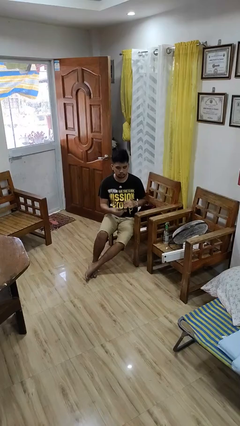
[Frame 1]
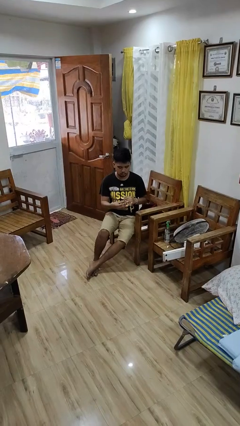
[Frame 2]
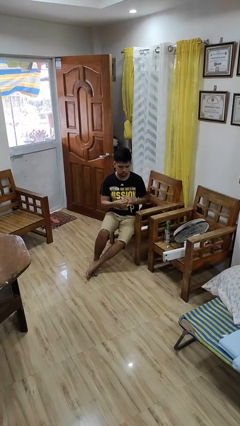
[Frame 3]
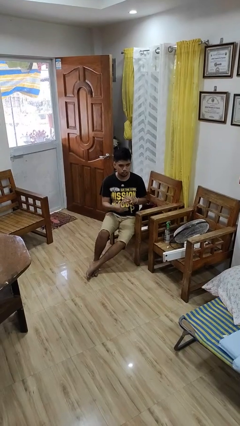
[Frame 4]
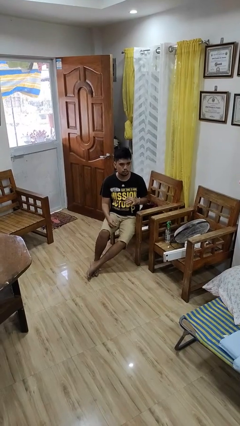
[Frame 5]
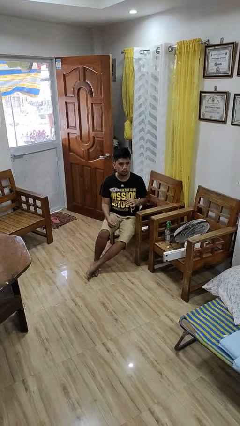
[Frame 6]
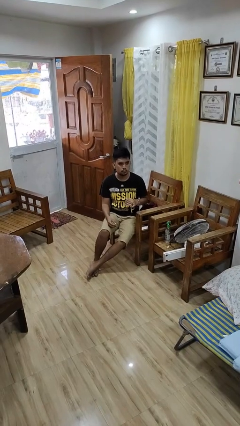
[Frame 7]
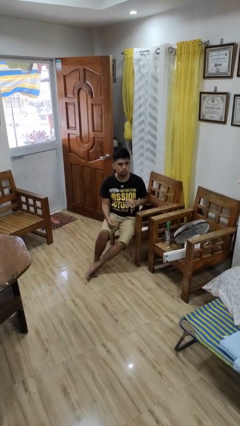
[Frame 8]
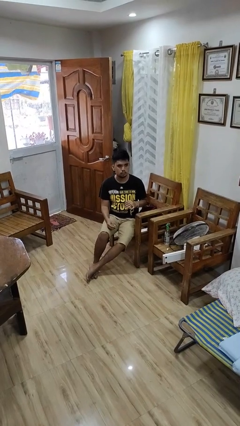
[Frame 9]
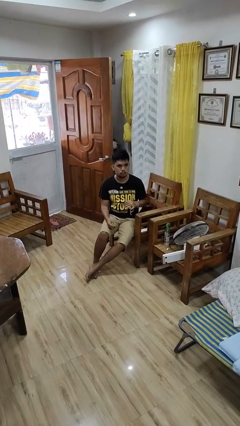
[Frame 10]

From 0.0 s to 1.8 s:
person puts on ring

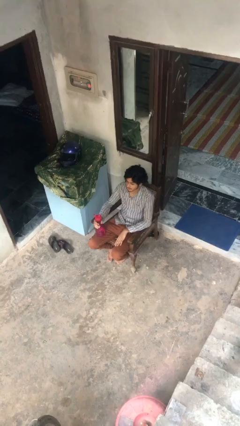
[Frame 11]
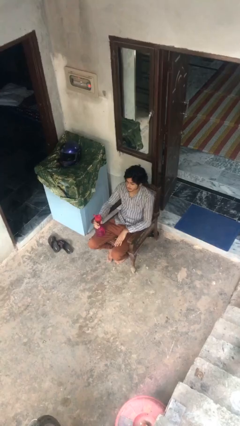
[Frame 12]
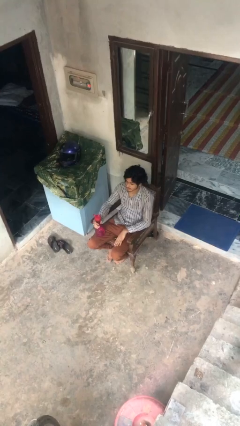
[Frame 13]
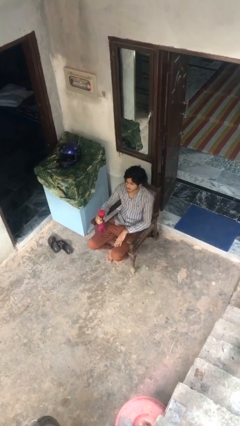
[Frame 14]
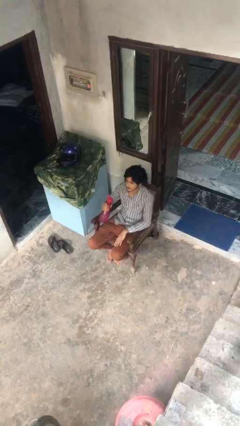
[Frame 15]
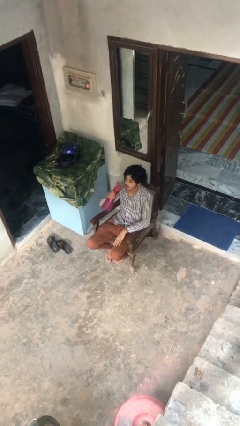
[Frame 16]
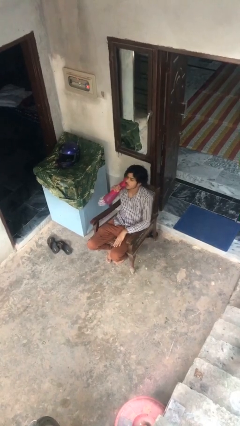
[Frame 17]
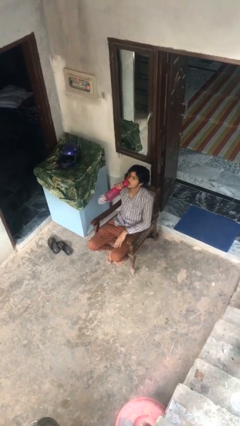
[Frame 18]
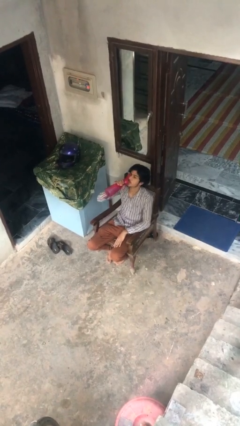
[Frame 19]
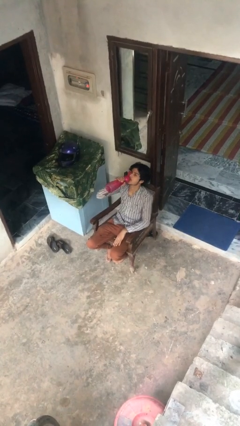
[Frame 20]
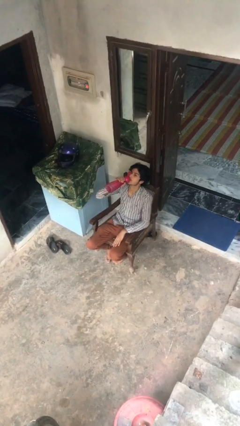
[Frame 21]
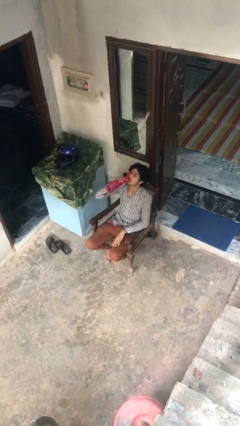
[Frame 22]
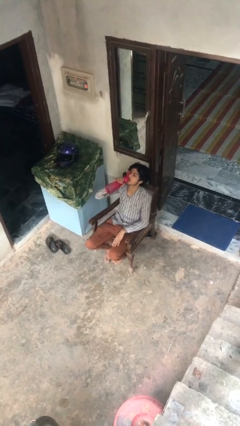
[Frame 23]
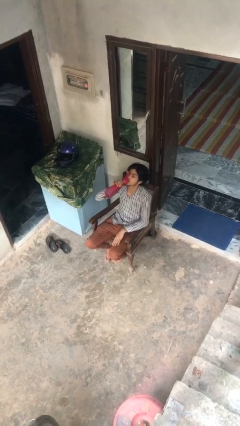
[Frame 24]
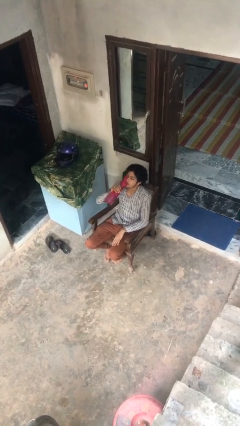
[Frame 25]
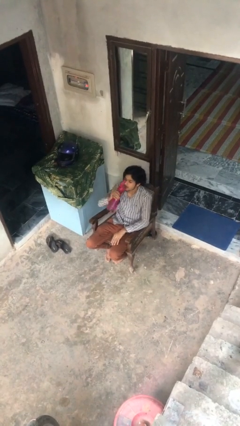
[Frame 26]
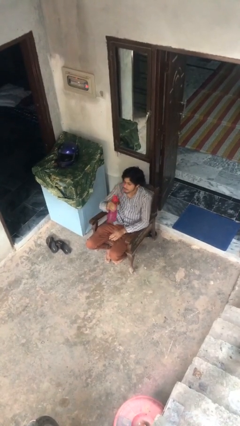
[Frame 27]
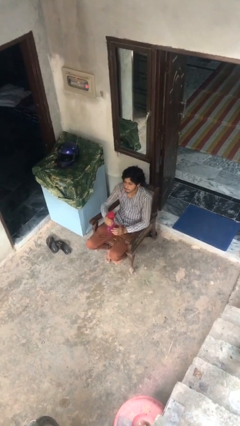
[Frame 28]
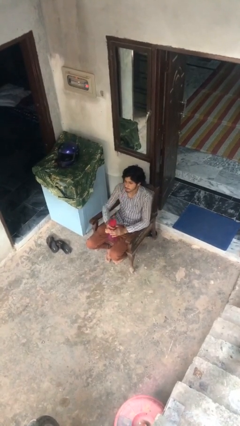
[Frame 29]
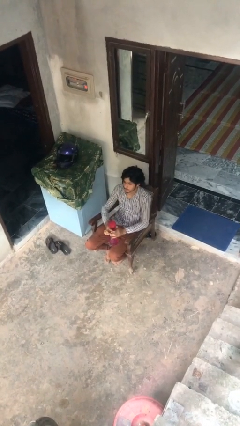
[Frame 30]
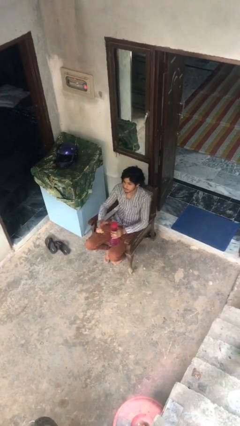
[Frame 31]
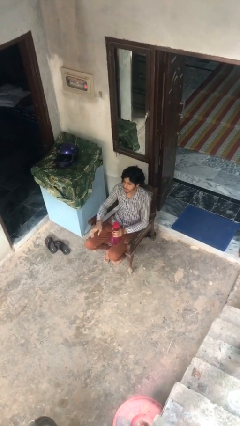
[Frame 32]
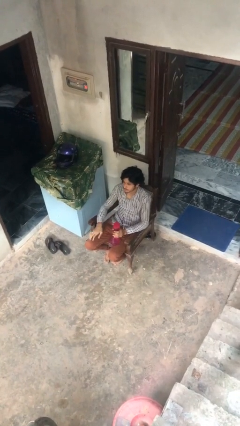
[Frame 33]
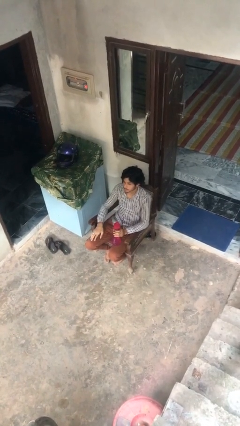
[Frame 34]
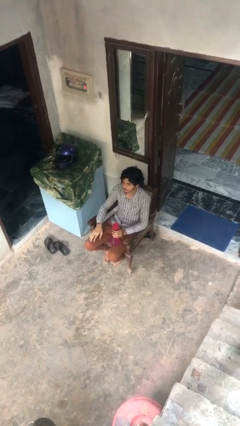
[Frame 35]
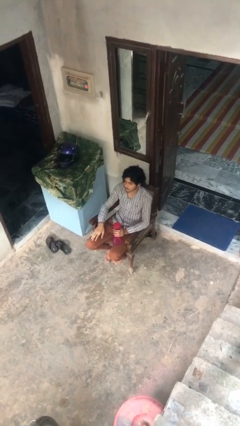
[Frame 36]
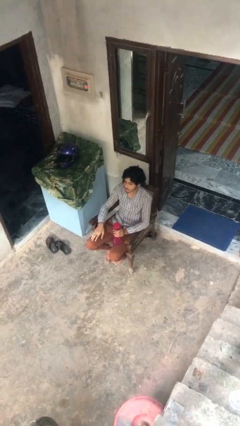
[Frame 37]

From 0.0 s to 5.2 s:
person drinks from bottle

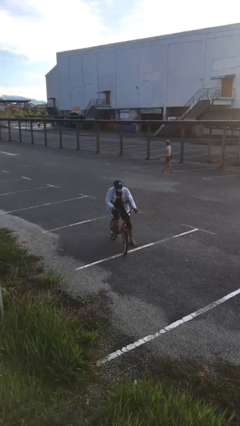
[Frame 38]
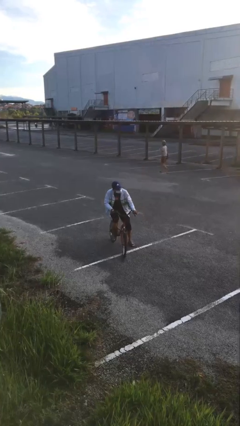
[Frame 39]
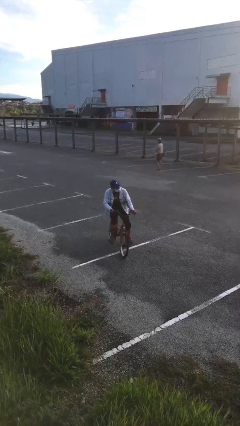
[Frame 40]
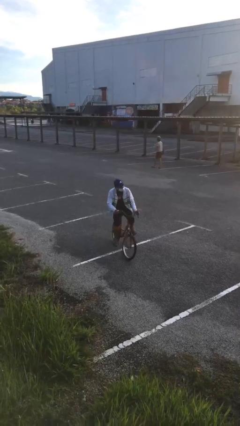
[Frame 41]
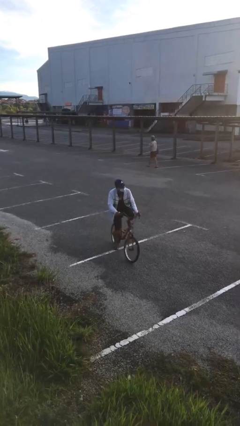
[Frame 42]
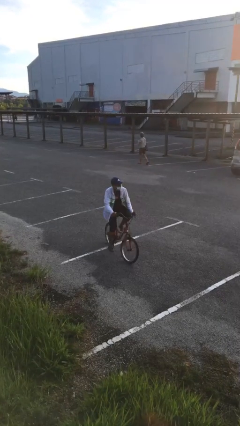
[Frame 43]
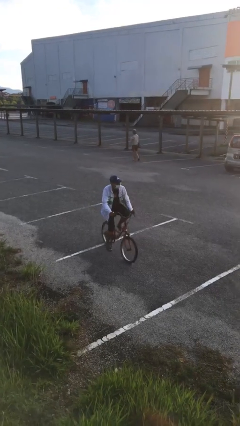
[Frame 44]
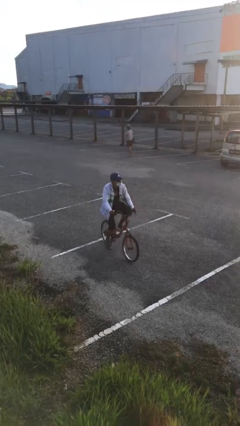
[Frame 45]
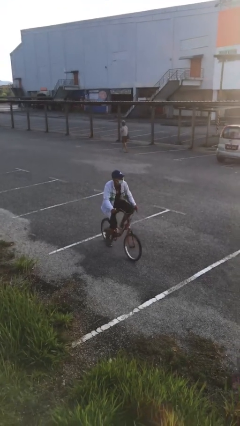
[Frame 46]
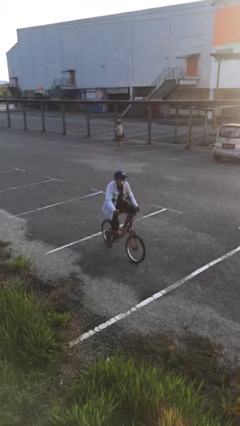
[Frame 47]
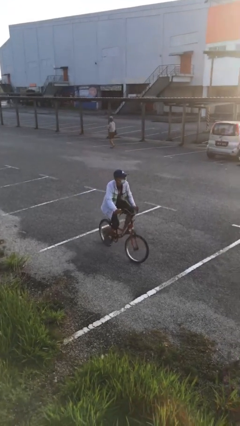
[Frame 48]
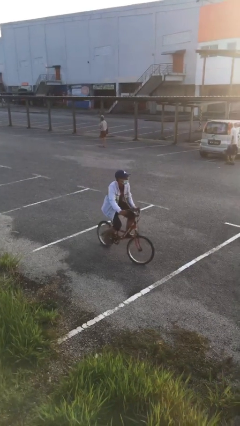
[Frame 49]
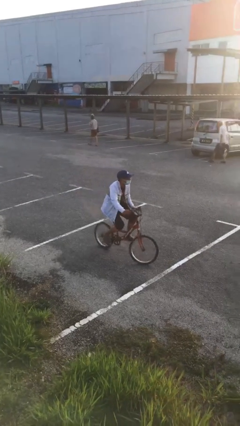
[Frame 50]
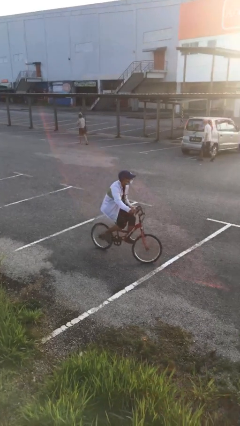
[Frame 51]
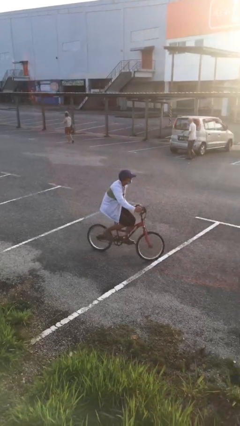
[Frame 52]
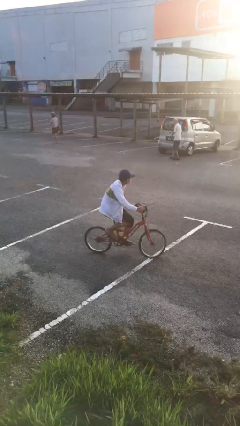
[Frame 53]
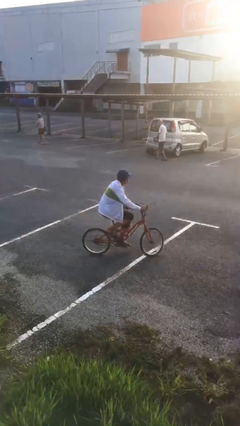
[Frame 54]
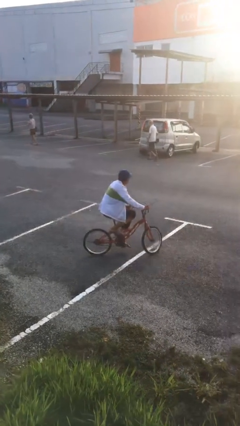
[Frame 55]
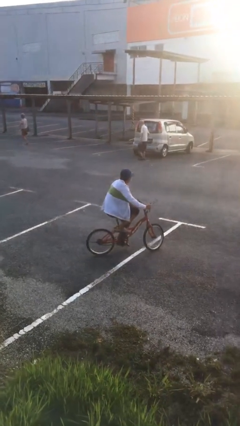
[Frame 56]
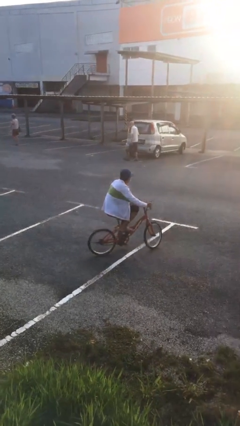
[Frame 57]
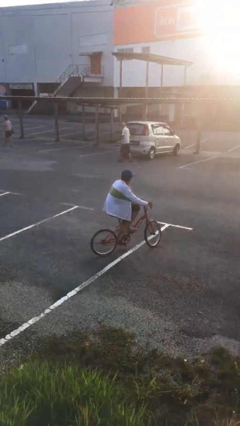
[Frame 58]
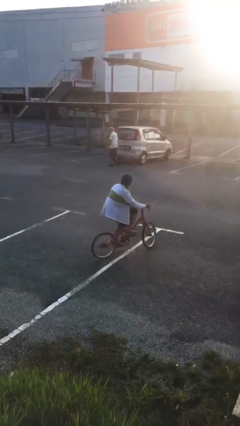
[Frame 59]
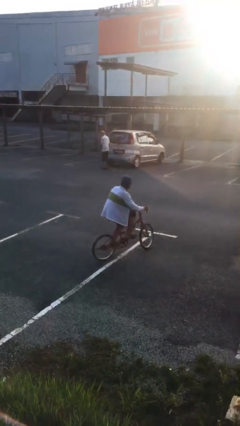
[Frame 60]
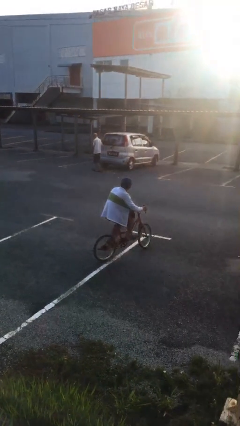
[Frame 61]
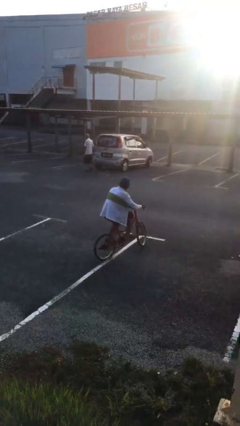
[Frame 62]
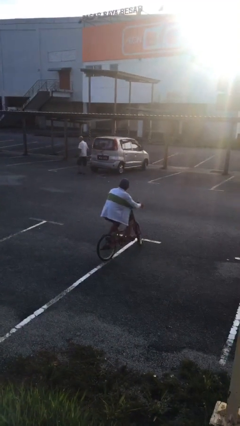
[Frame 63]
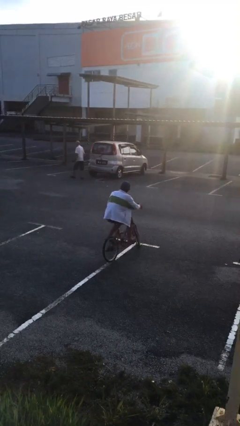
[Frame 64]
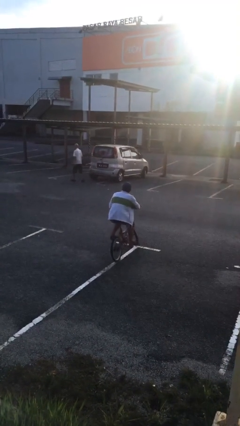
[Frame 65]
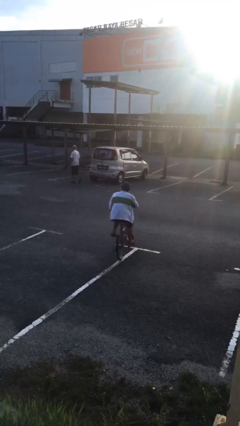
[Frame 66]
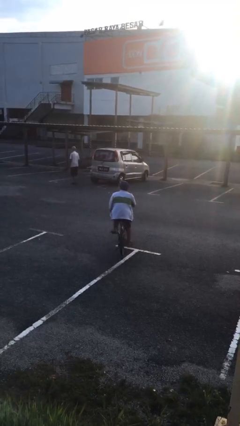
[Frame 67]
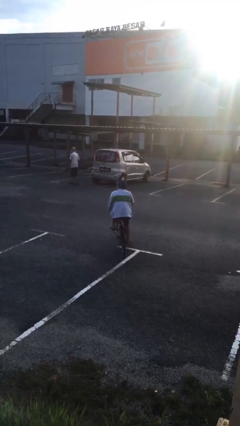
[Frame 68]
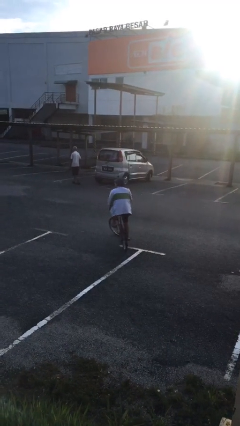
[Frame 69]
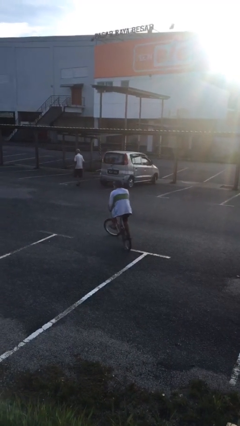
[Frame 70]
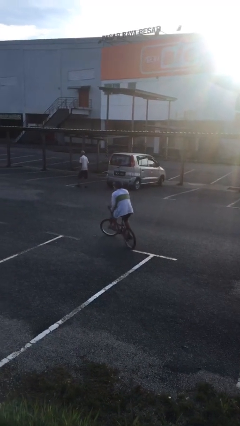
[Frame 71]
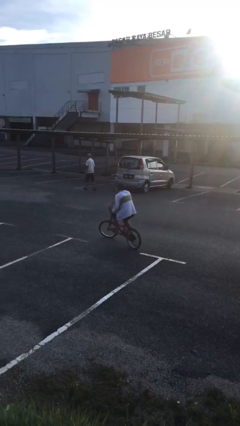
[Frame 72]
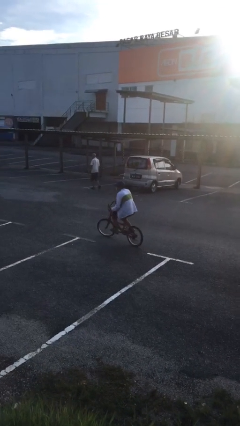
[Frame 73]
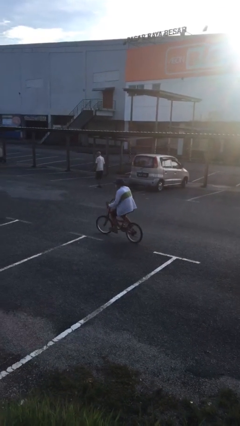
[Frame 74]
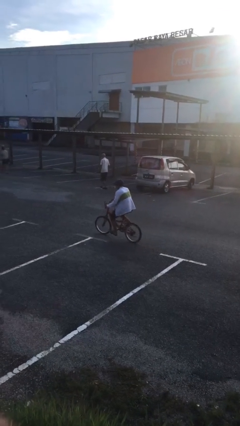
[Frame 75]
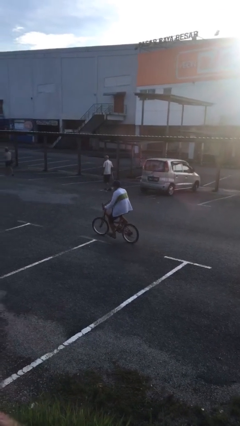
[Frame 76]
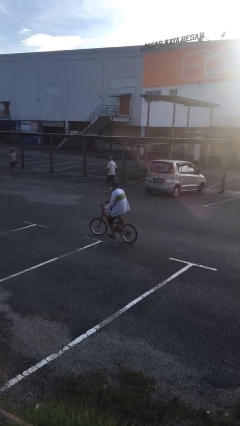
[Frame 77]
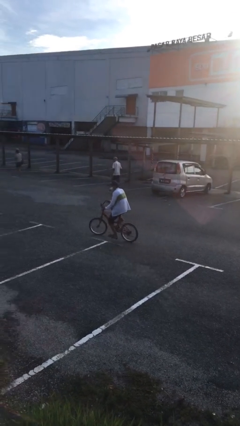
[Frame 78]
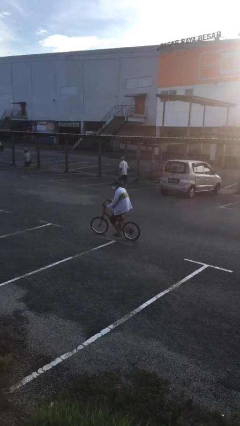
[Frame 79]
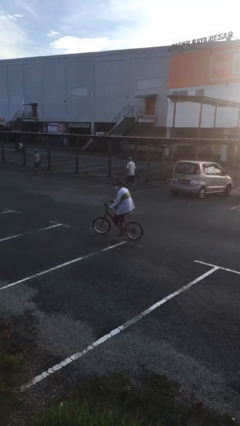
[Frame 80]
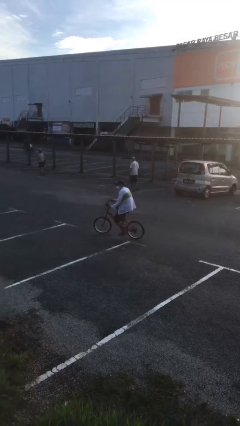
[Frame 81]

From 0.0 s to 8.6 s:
person rides bicycle

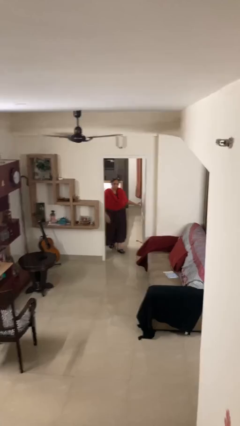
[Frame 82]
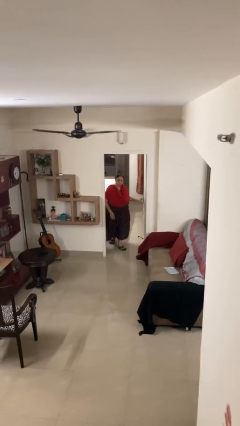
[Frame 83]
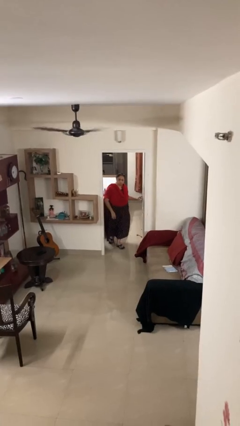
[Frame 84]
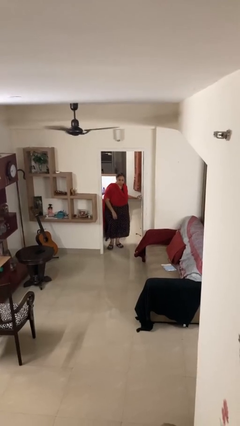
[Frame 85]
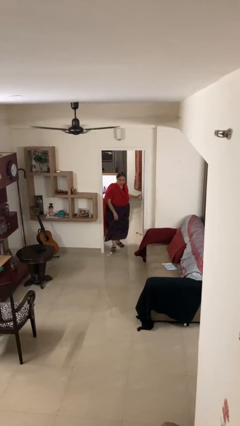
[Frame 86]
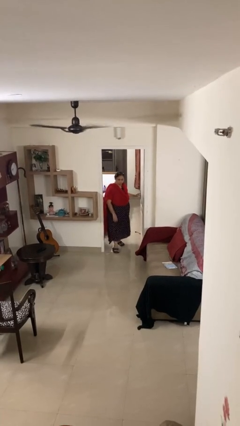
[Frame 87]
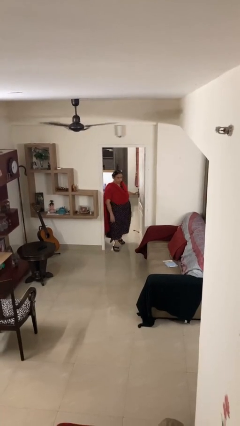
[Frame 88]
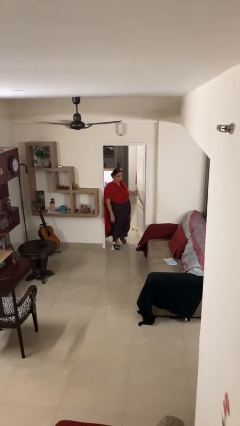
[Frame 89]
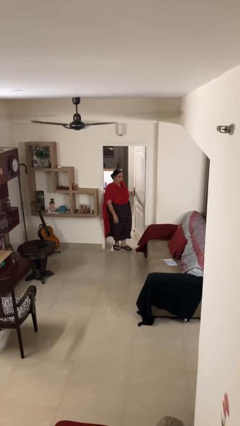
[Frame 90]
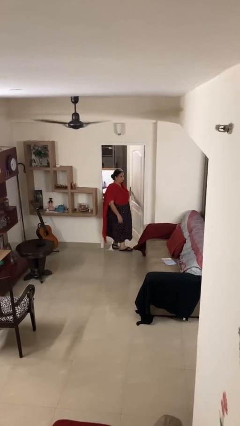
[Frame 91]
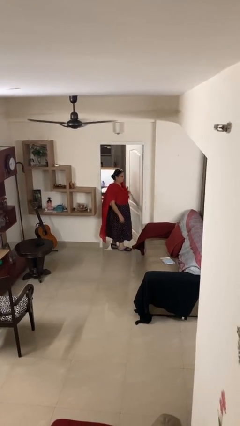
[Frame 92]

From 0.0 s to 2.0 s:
person enters scene through structure

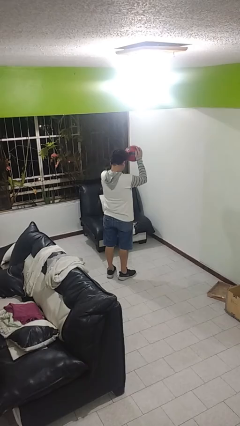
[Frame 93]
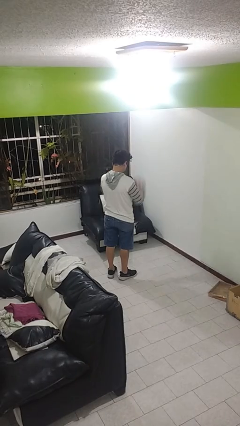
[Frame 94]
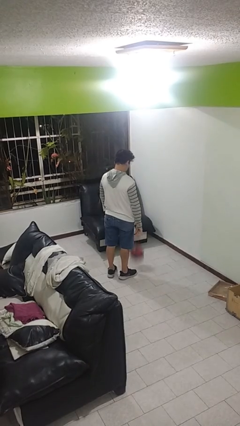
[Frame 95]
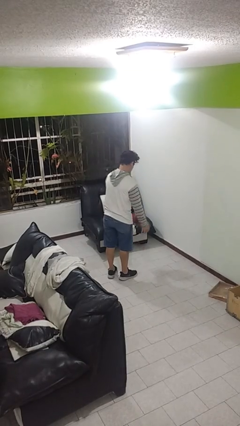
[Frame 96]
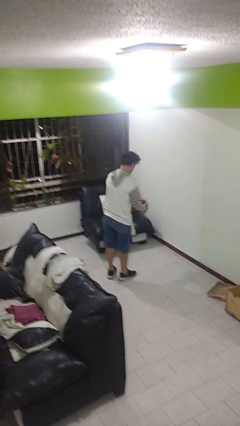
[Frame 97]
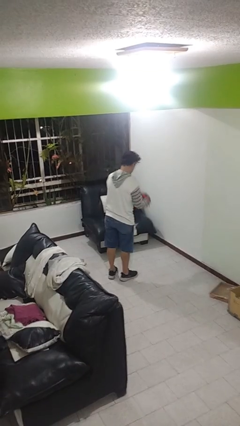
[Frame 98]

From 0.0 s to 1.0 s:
person bounces ball on floor
